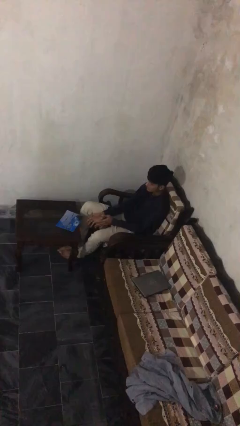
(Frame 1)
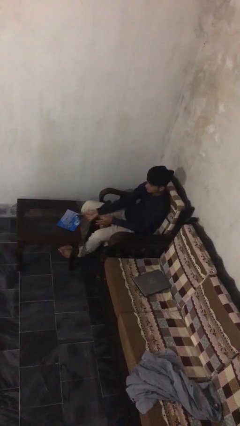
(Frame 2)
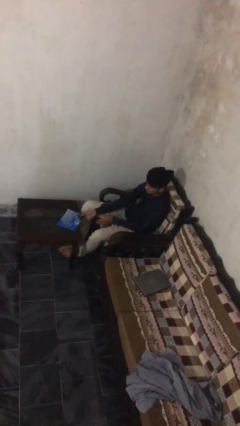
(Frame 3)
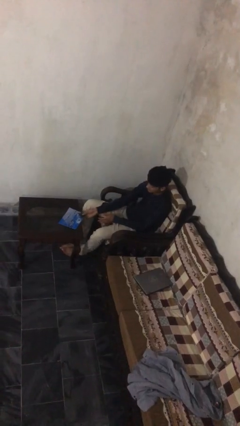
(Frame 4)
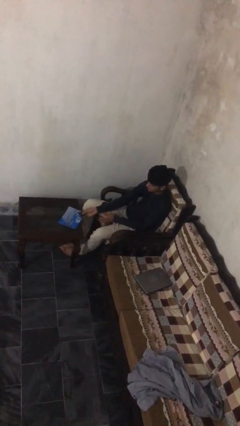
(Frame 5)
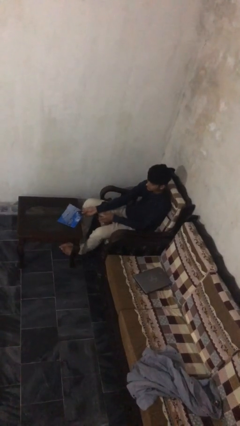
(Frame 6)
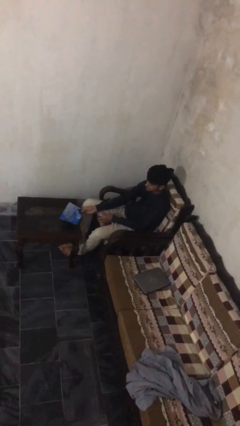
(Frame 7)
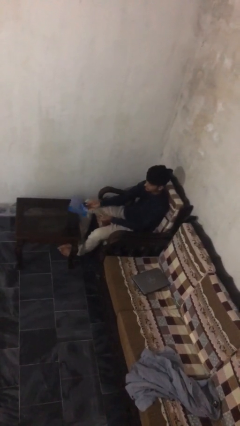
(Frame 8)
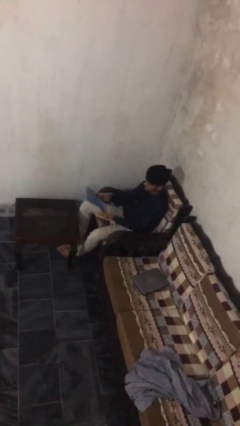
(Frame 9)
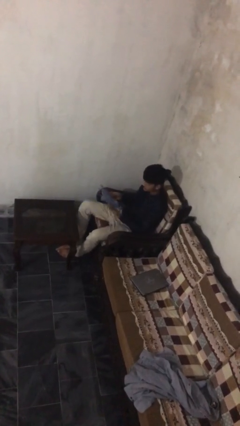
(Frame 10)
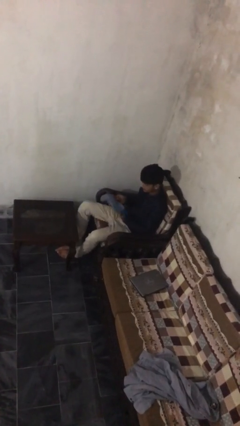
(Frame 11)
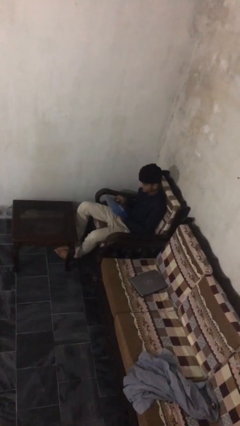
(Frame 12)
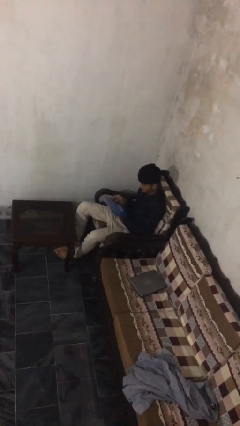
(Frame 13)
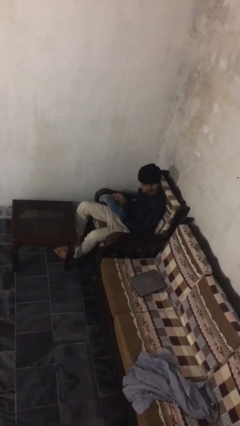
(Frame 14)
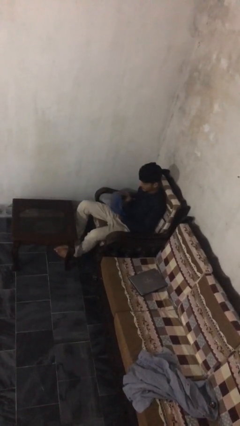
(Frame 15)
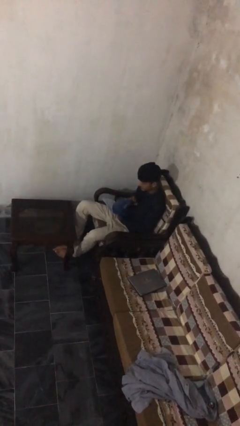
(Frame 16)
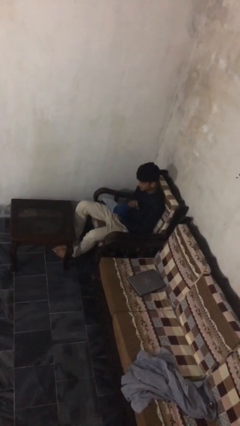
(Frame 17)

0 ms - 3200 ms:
person picks up object from table

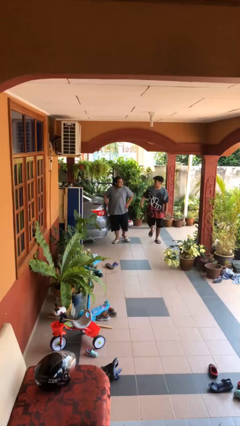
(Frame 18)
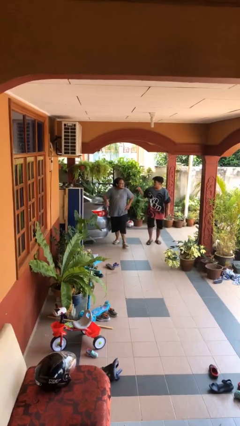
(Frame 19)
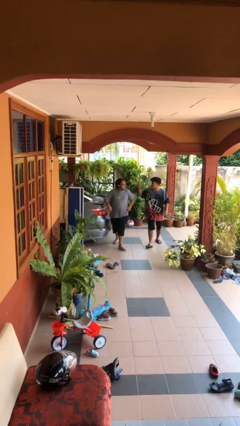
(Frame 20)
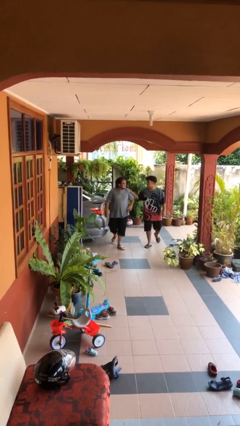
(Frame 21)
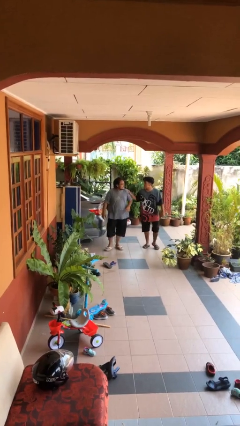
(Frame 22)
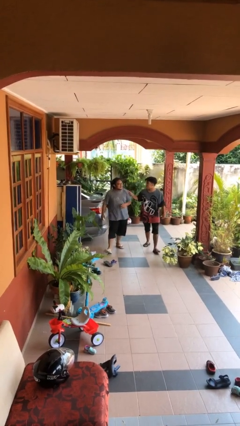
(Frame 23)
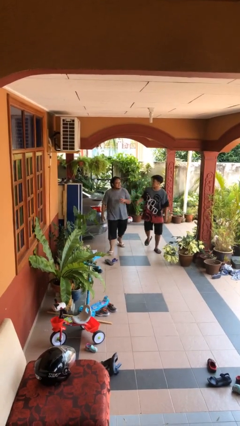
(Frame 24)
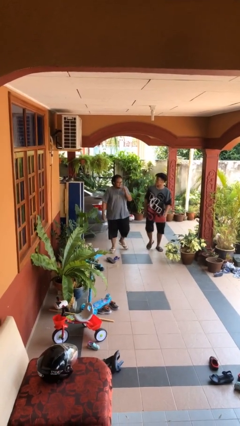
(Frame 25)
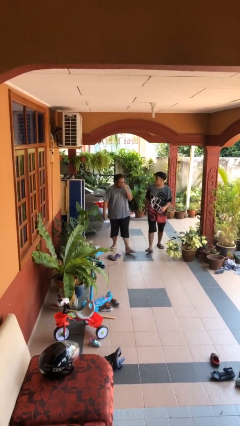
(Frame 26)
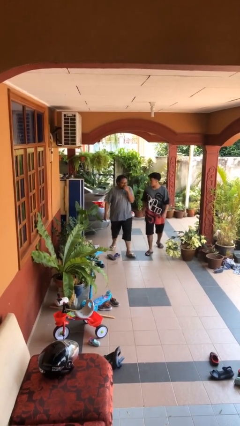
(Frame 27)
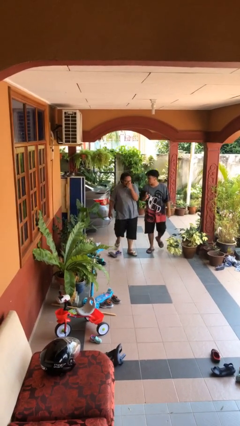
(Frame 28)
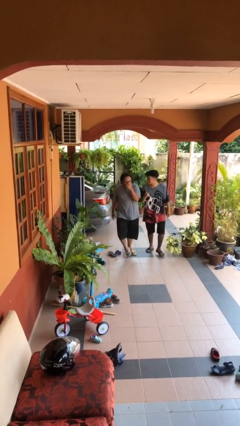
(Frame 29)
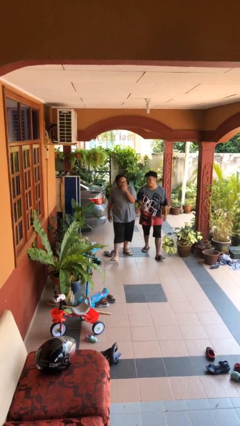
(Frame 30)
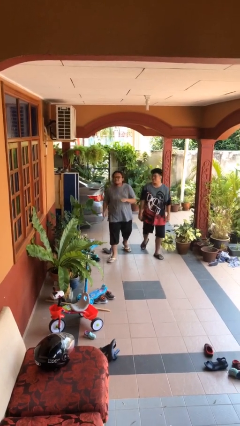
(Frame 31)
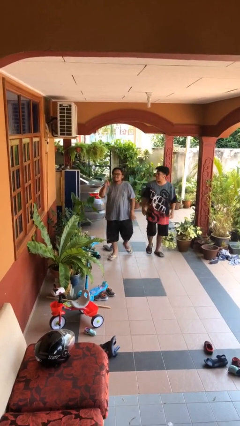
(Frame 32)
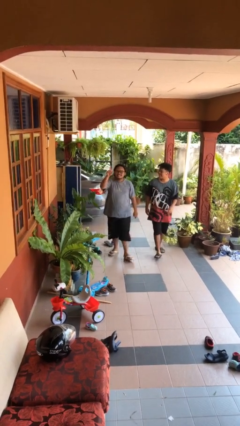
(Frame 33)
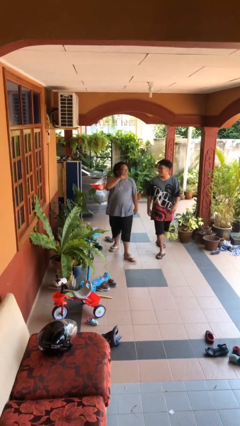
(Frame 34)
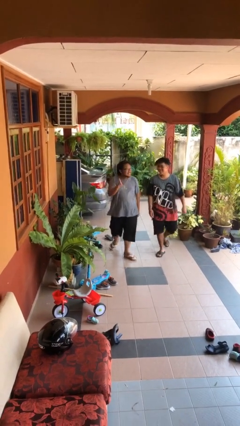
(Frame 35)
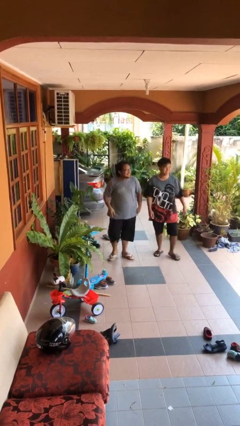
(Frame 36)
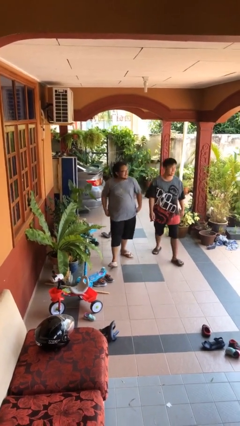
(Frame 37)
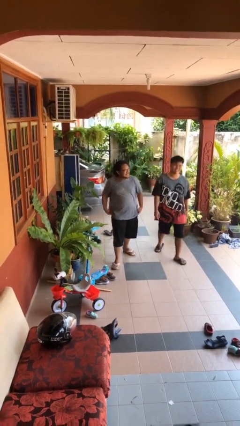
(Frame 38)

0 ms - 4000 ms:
person talks to person

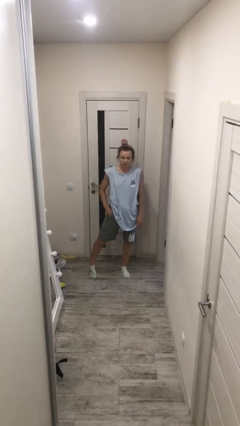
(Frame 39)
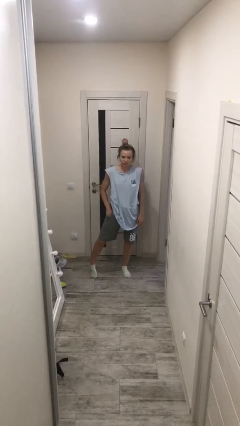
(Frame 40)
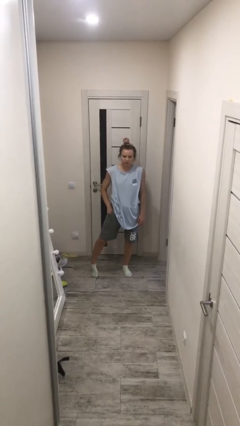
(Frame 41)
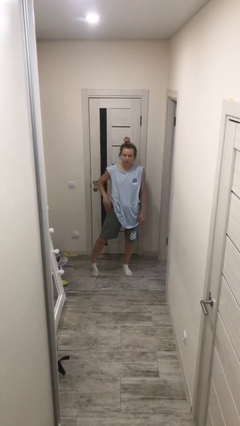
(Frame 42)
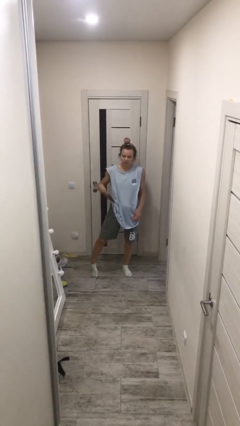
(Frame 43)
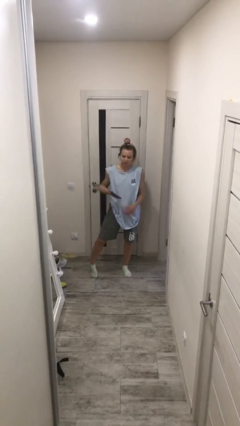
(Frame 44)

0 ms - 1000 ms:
person takes phone from pocket

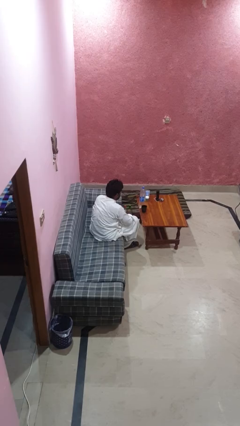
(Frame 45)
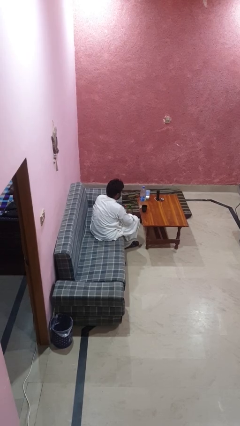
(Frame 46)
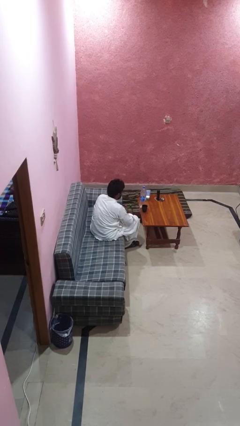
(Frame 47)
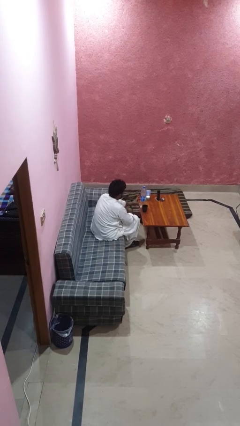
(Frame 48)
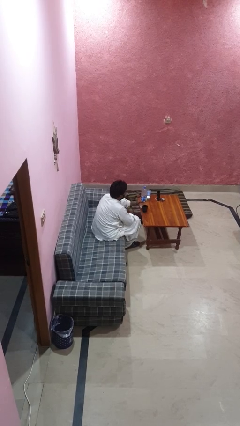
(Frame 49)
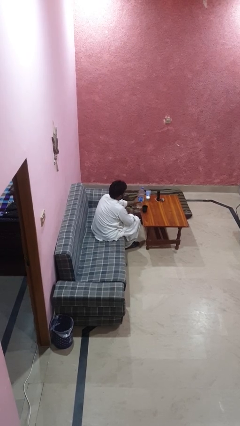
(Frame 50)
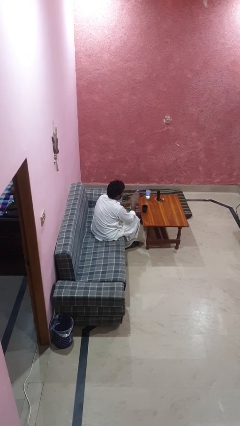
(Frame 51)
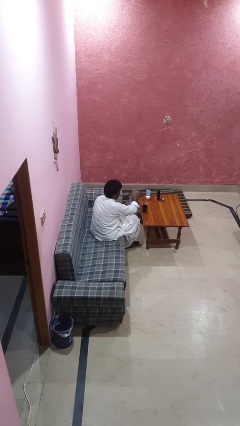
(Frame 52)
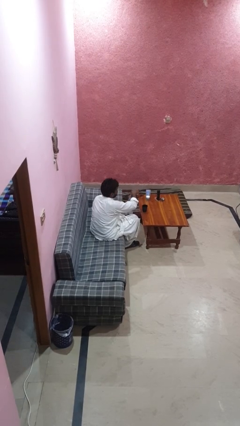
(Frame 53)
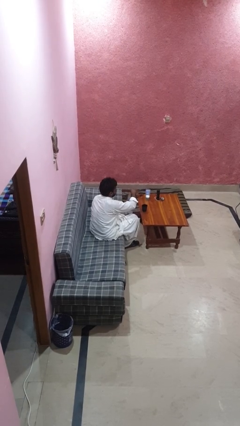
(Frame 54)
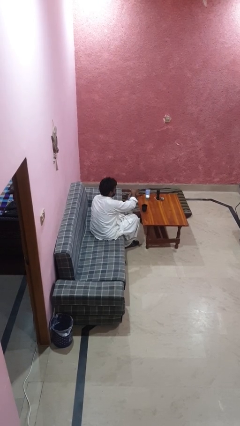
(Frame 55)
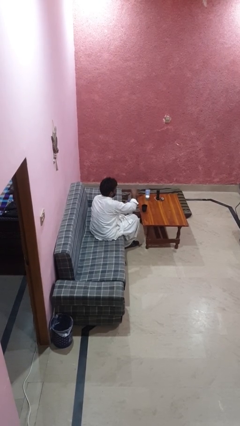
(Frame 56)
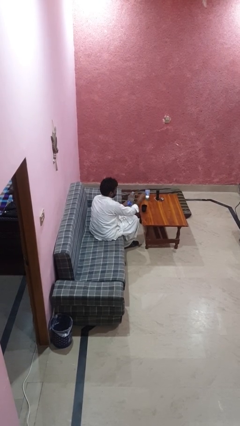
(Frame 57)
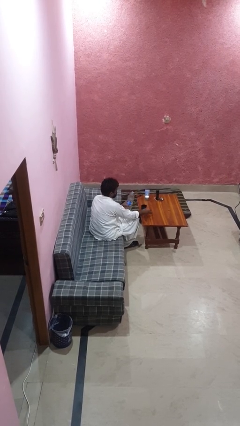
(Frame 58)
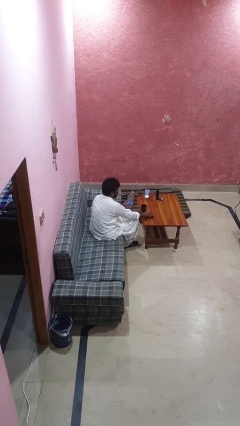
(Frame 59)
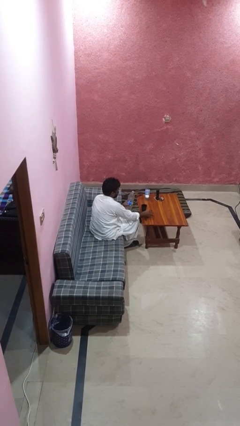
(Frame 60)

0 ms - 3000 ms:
person unscrews lid from bottle

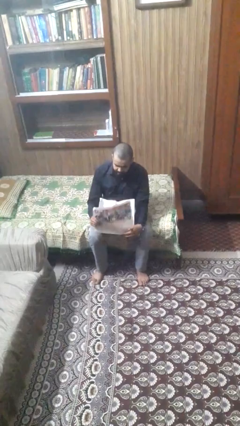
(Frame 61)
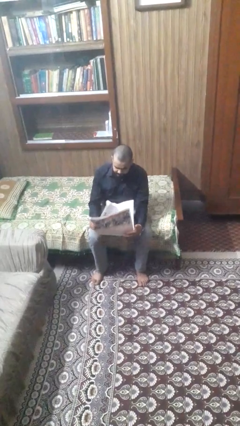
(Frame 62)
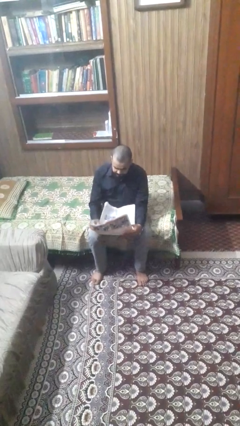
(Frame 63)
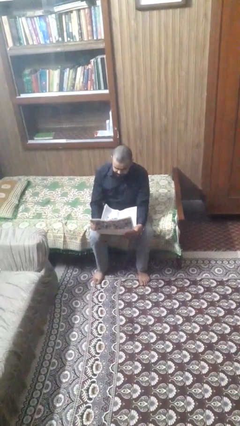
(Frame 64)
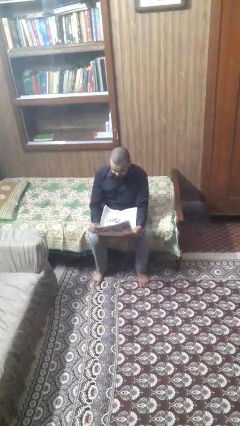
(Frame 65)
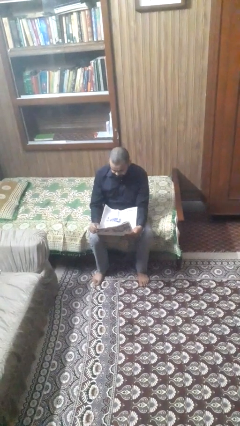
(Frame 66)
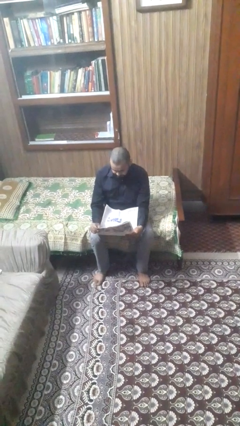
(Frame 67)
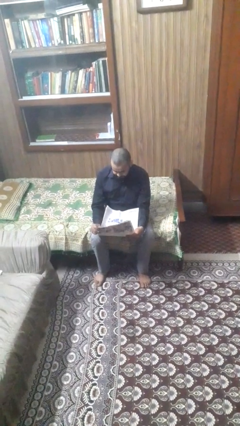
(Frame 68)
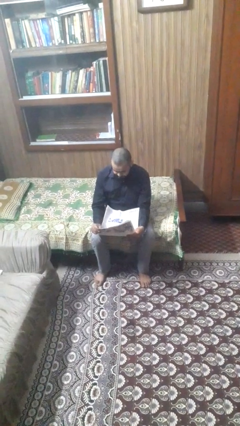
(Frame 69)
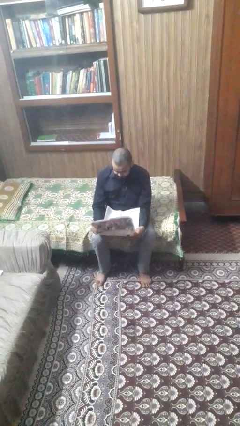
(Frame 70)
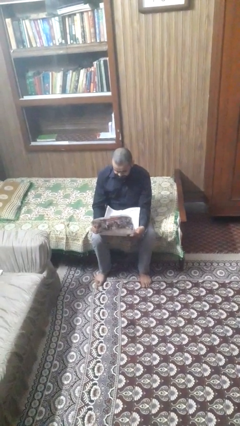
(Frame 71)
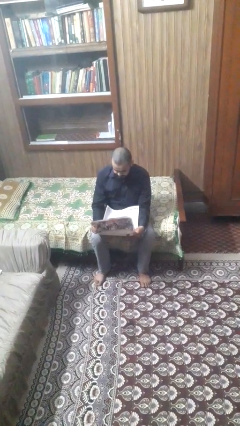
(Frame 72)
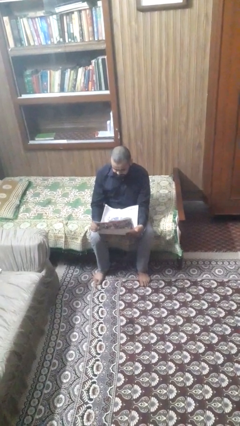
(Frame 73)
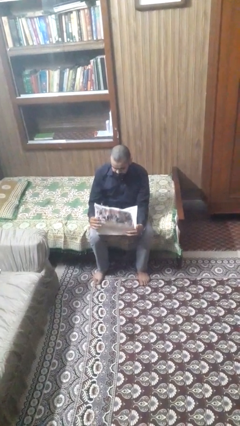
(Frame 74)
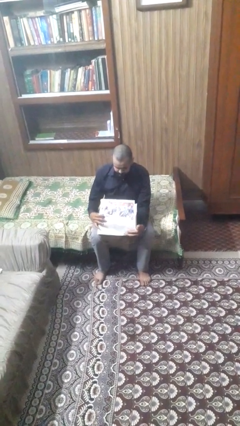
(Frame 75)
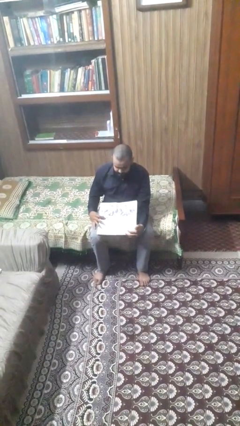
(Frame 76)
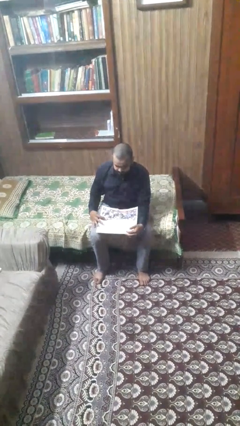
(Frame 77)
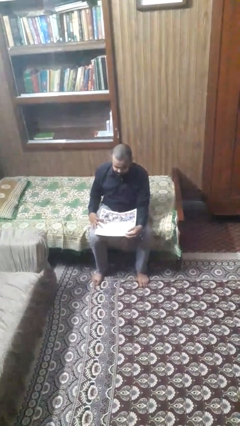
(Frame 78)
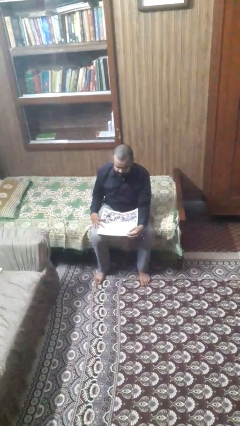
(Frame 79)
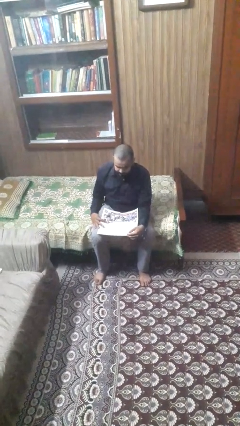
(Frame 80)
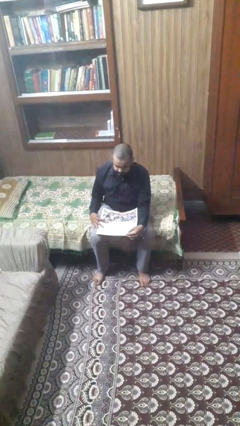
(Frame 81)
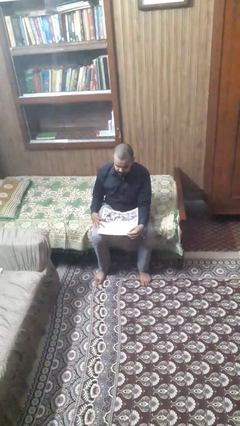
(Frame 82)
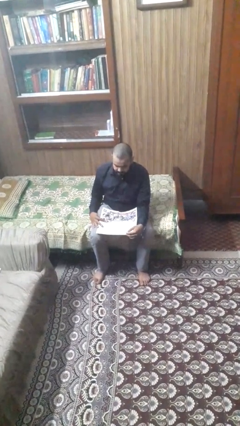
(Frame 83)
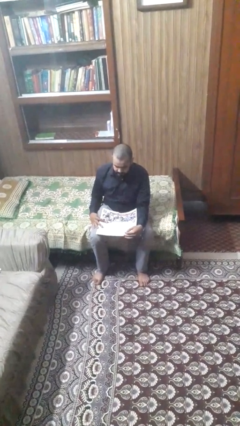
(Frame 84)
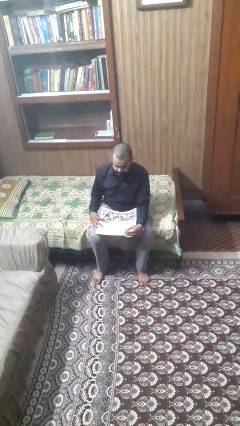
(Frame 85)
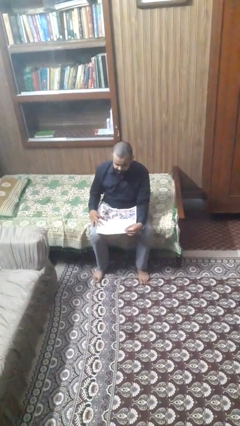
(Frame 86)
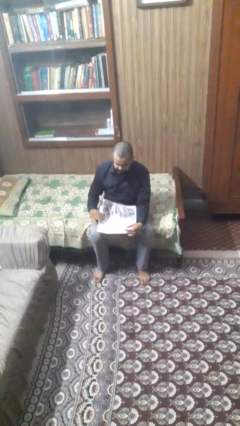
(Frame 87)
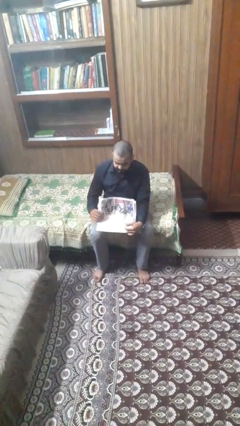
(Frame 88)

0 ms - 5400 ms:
person reads newspaper

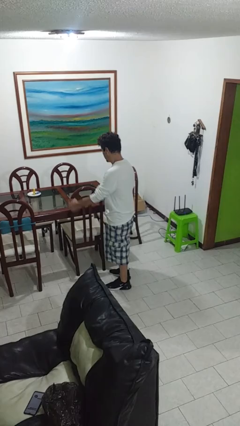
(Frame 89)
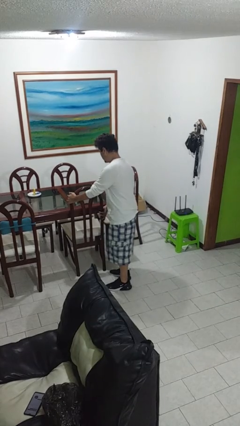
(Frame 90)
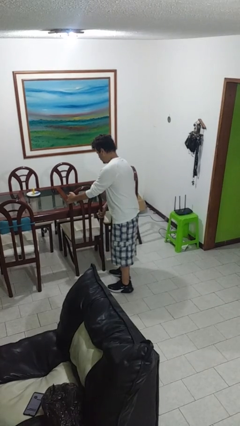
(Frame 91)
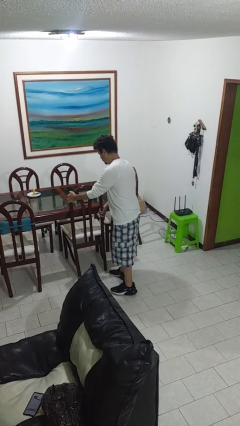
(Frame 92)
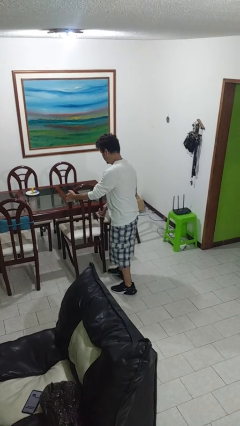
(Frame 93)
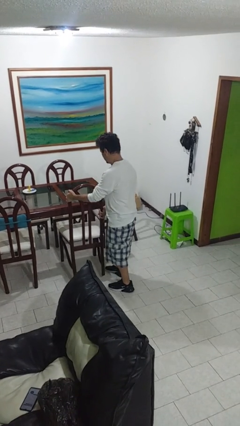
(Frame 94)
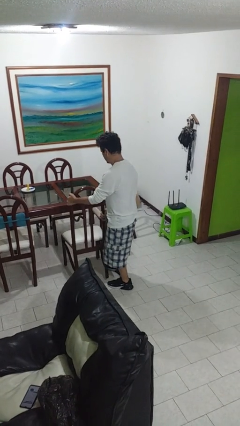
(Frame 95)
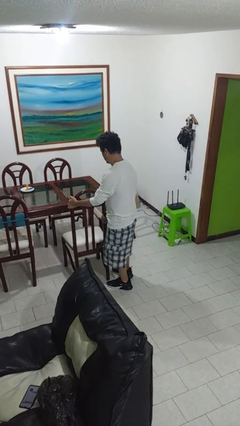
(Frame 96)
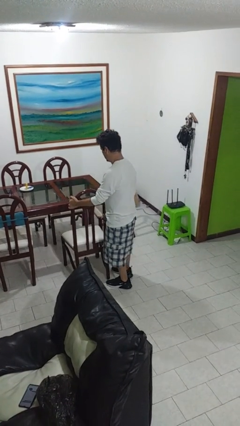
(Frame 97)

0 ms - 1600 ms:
person pulls out chair
